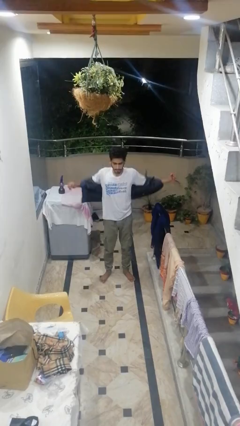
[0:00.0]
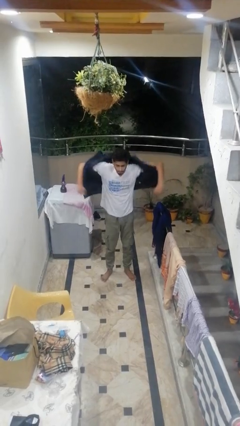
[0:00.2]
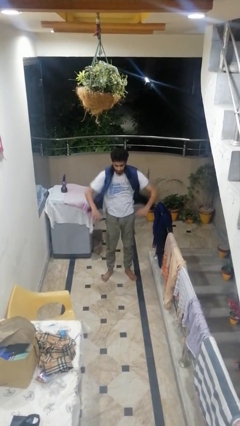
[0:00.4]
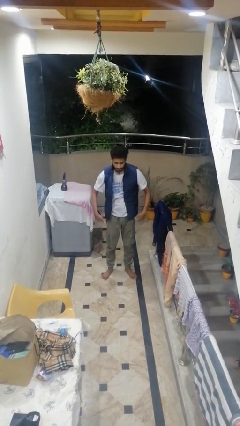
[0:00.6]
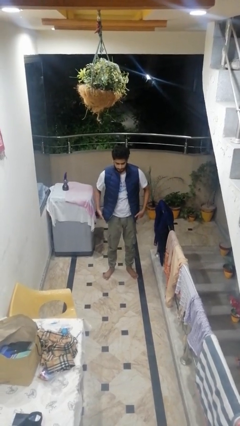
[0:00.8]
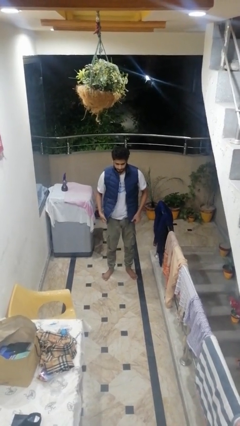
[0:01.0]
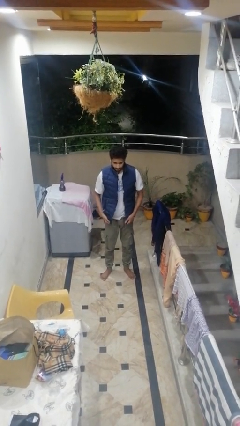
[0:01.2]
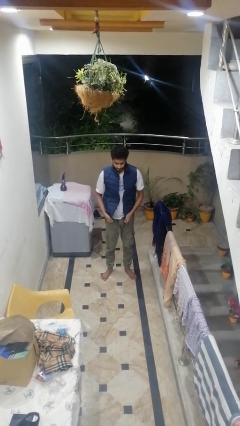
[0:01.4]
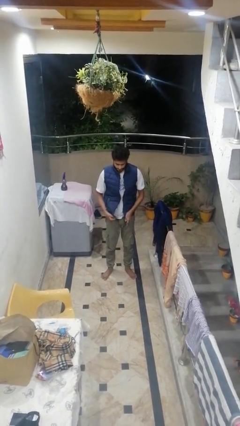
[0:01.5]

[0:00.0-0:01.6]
person puts on jacket

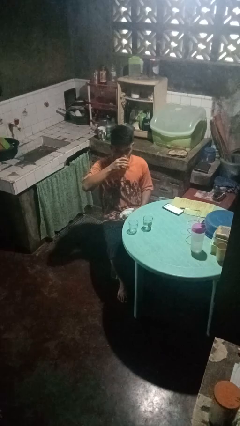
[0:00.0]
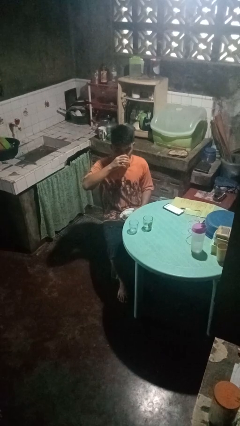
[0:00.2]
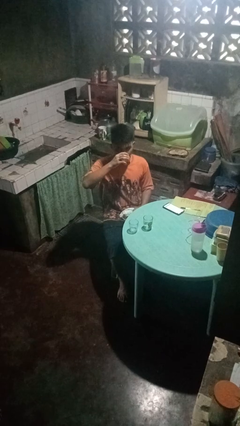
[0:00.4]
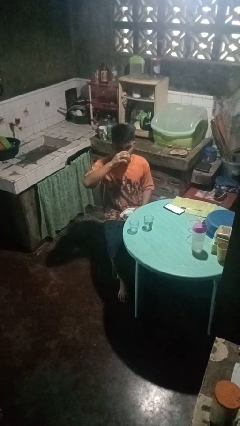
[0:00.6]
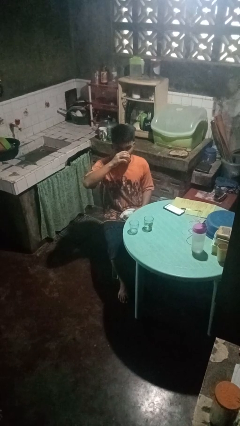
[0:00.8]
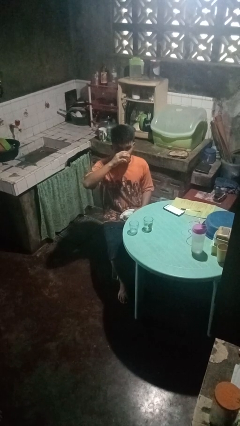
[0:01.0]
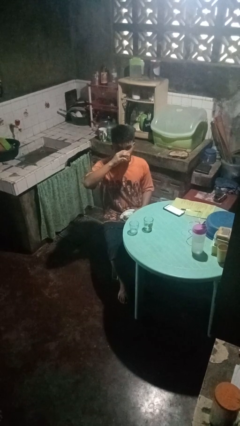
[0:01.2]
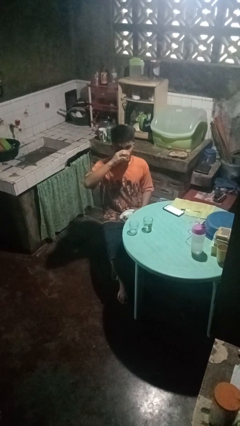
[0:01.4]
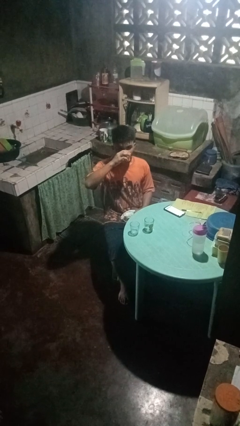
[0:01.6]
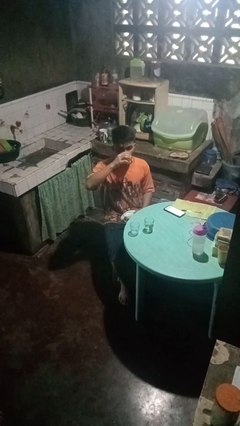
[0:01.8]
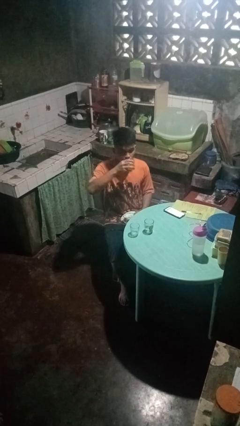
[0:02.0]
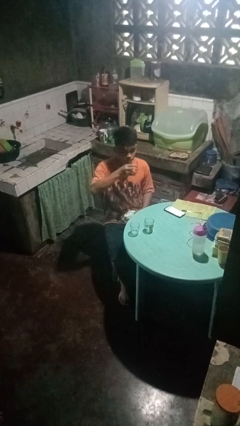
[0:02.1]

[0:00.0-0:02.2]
person drinks from shotglass

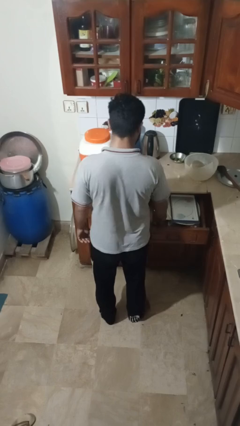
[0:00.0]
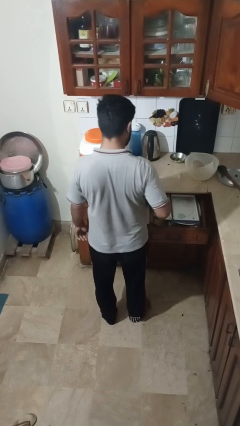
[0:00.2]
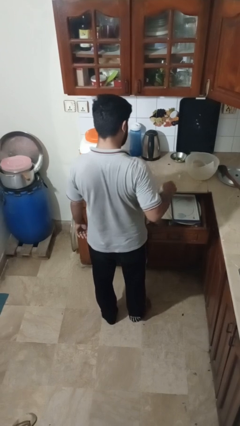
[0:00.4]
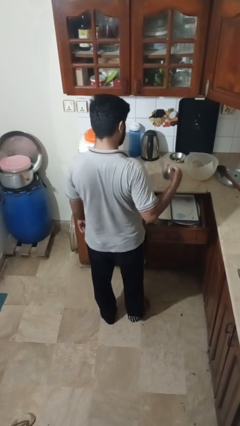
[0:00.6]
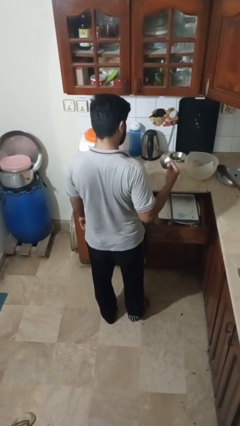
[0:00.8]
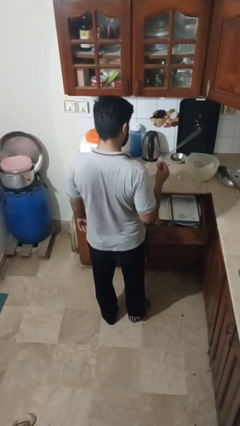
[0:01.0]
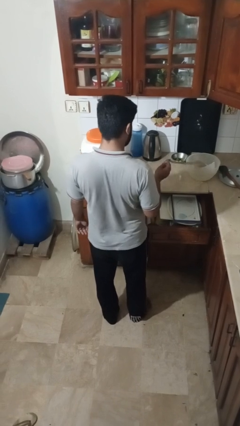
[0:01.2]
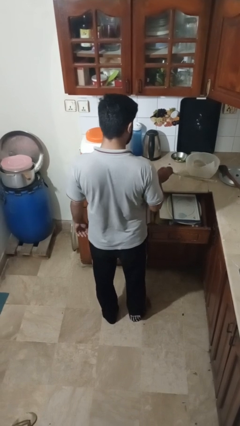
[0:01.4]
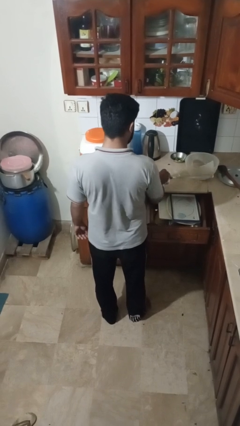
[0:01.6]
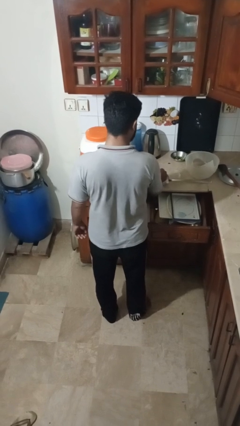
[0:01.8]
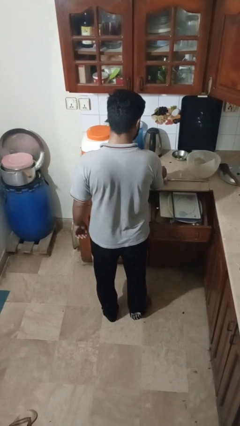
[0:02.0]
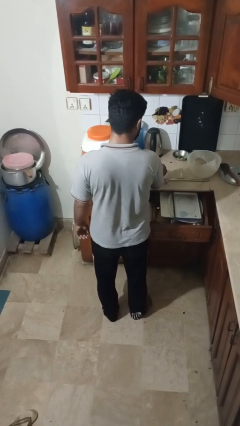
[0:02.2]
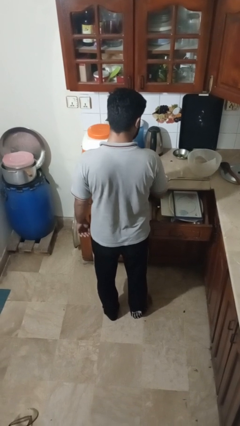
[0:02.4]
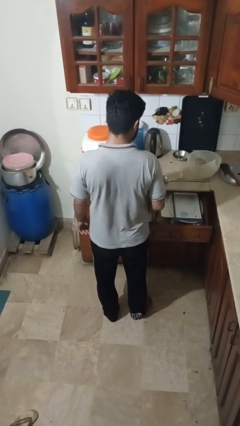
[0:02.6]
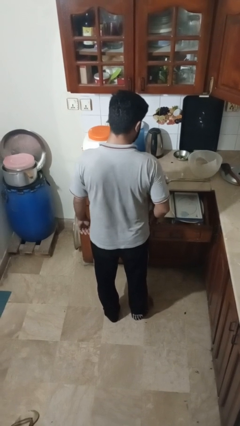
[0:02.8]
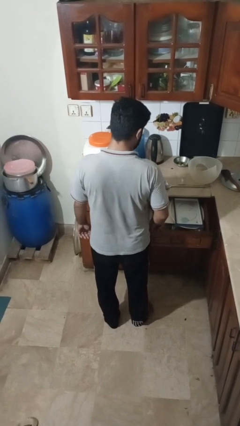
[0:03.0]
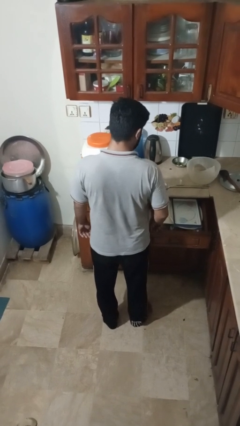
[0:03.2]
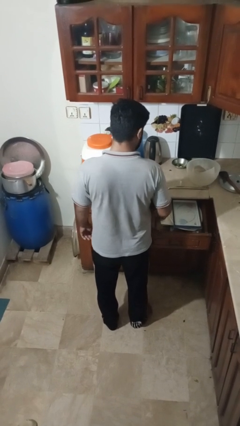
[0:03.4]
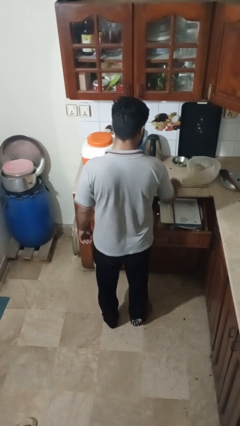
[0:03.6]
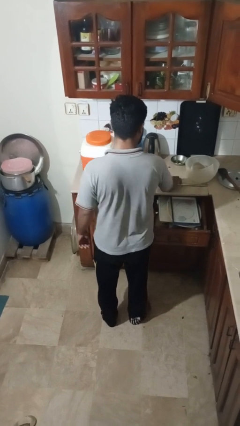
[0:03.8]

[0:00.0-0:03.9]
person takes object from kitchen drawer

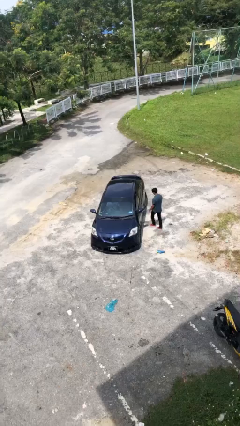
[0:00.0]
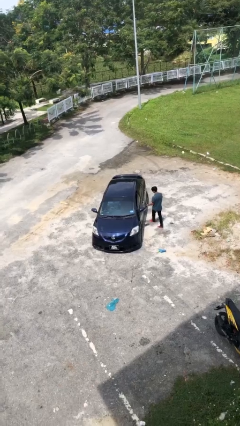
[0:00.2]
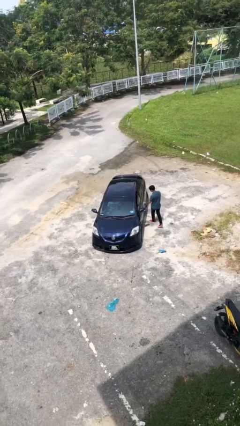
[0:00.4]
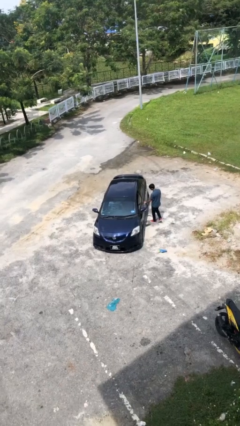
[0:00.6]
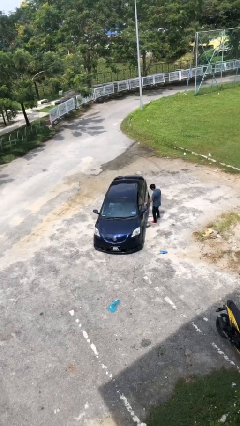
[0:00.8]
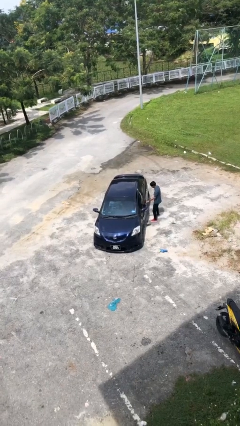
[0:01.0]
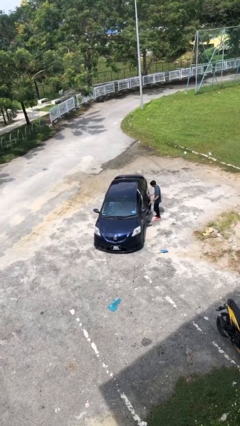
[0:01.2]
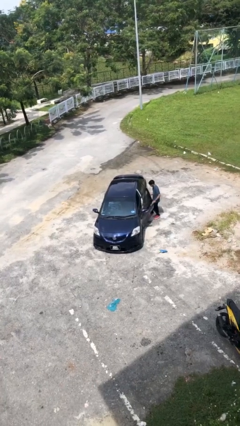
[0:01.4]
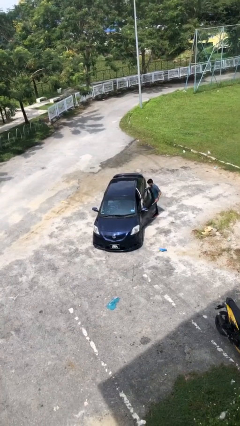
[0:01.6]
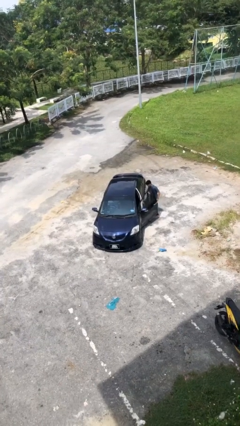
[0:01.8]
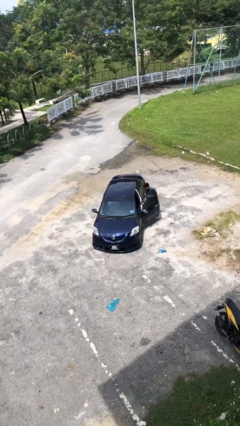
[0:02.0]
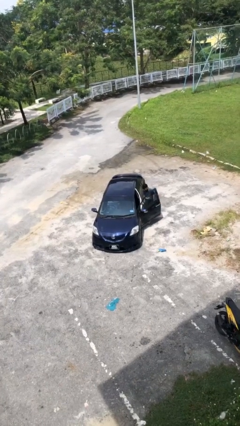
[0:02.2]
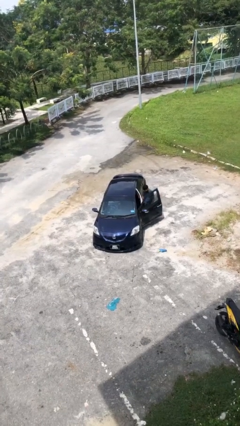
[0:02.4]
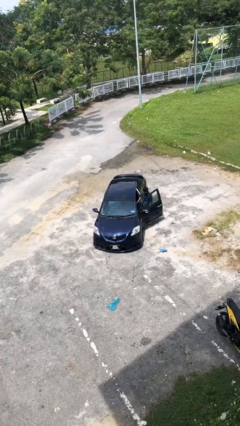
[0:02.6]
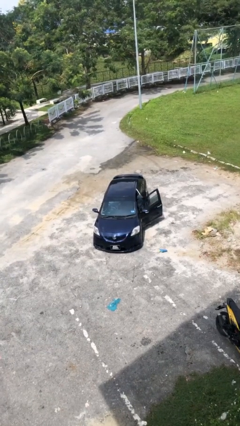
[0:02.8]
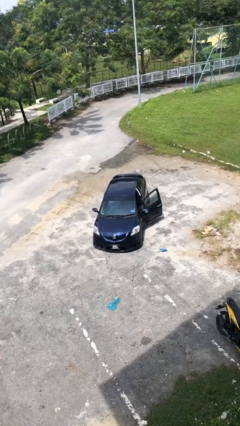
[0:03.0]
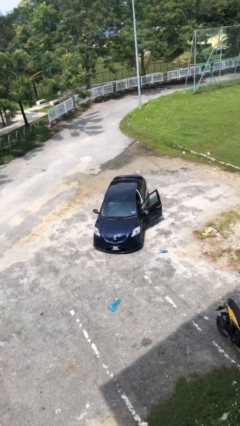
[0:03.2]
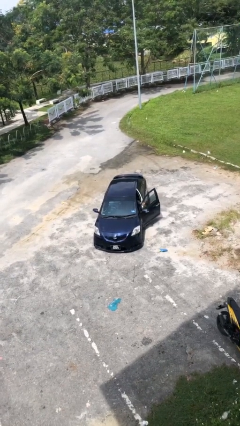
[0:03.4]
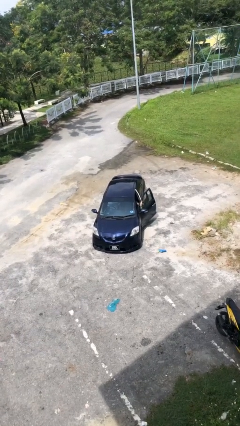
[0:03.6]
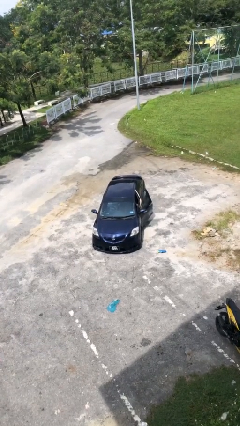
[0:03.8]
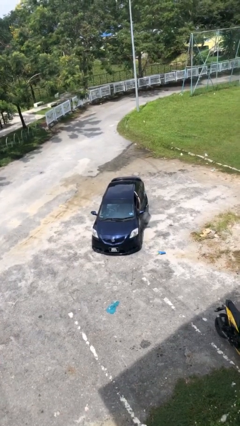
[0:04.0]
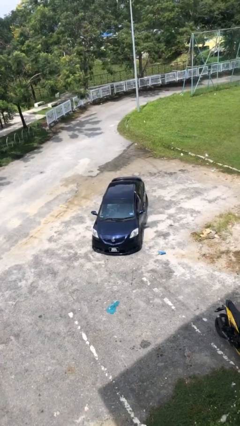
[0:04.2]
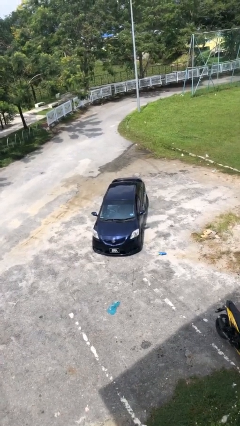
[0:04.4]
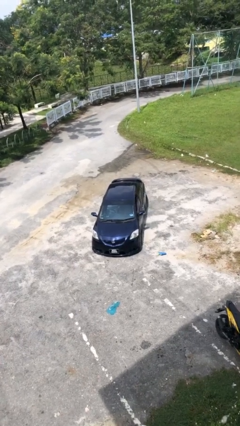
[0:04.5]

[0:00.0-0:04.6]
car picks up person

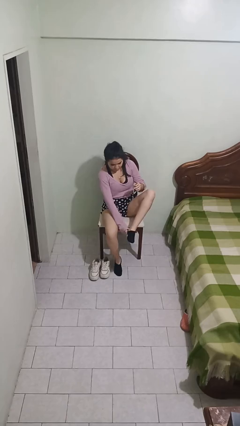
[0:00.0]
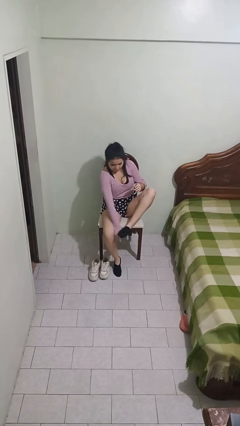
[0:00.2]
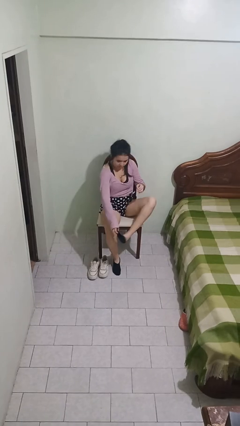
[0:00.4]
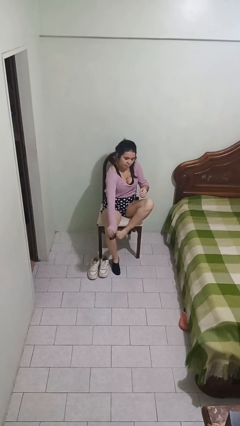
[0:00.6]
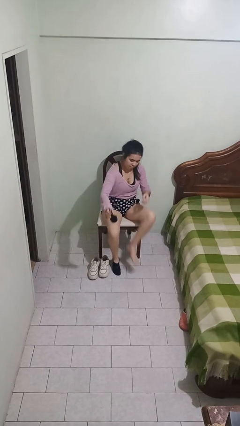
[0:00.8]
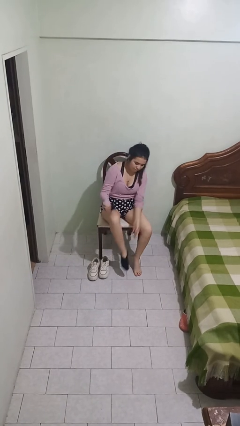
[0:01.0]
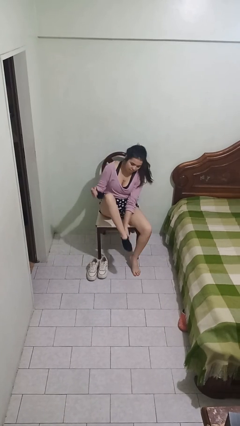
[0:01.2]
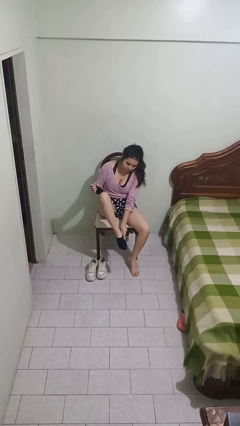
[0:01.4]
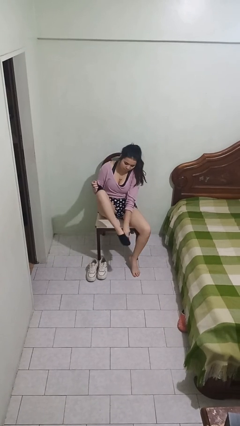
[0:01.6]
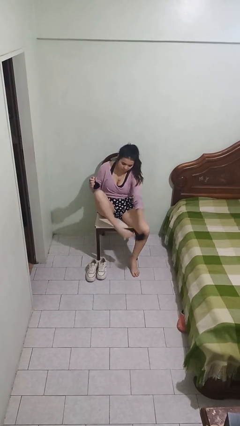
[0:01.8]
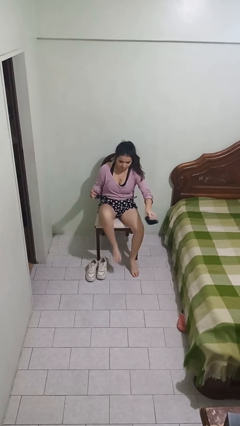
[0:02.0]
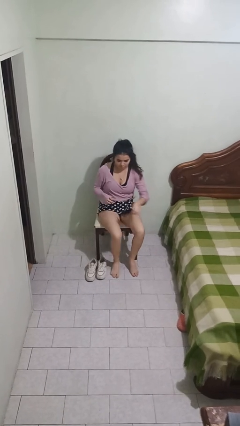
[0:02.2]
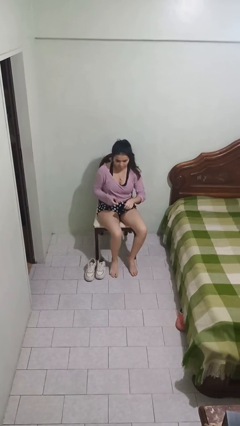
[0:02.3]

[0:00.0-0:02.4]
person takes off socks

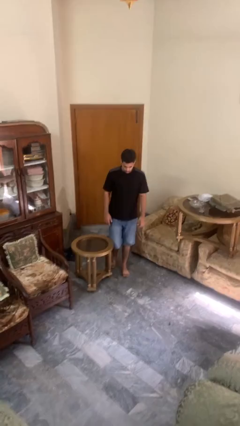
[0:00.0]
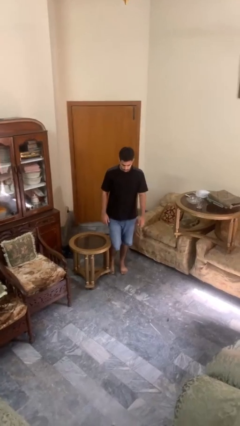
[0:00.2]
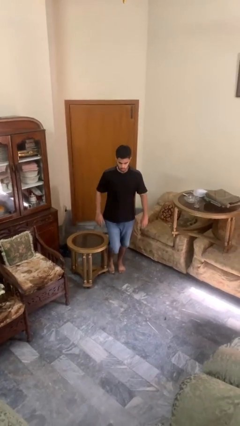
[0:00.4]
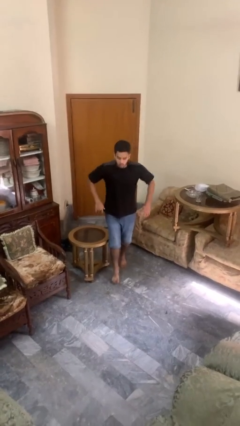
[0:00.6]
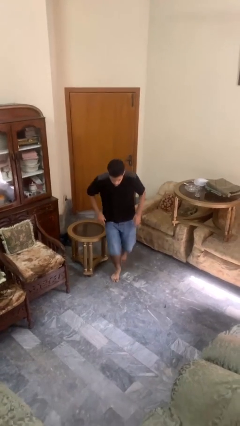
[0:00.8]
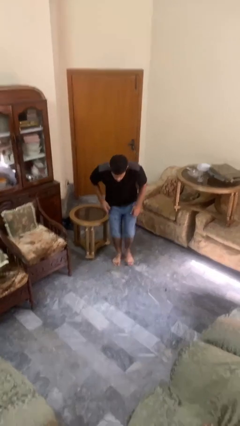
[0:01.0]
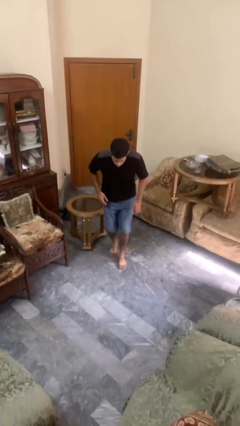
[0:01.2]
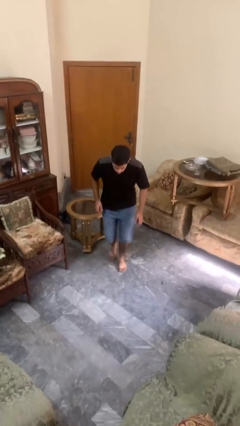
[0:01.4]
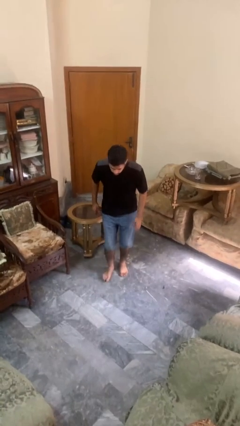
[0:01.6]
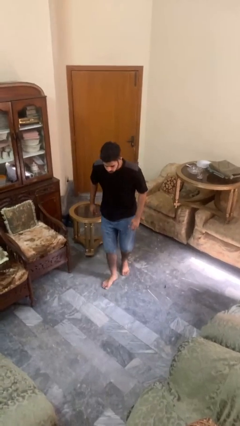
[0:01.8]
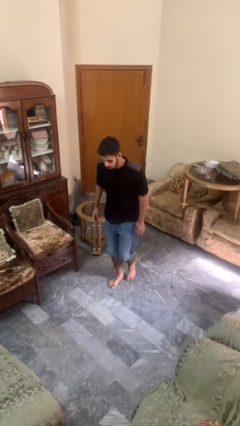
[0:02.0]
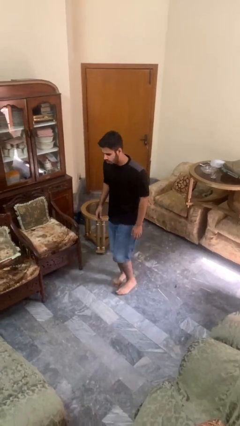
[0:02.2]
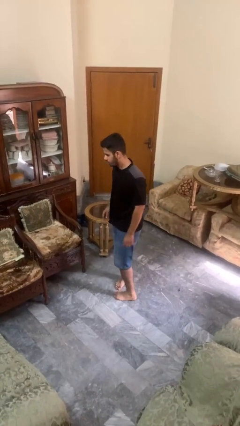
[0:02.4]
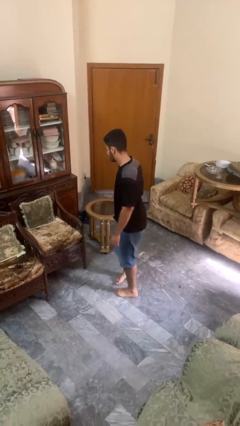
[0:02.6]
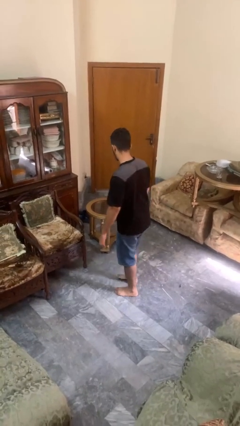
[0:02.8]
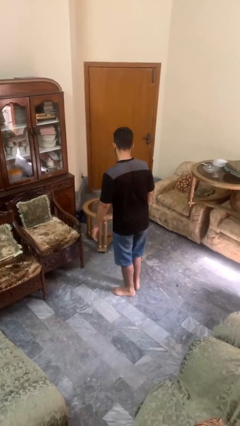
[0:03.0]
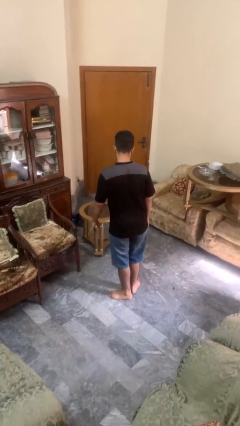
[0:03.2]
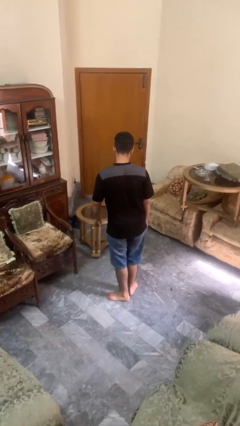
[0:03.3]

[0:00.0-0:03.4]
person stubs toe
